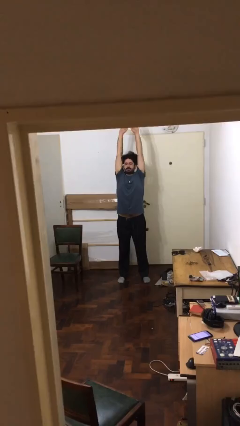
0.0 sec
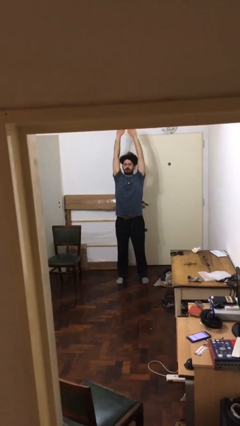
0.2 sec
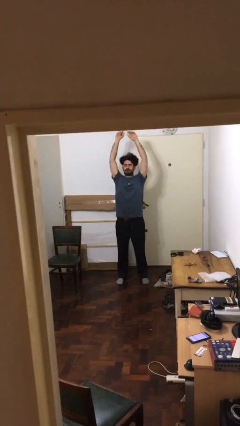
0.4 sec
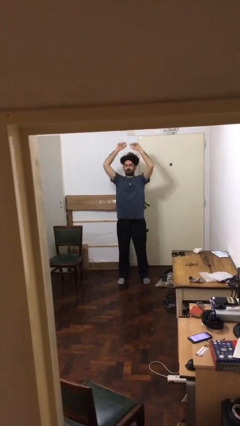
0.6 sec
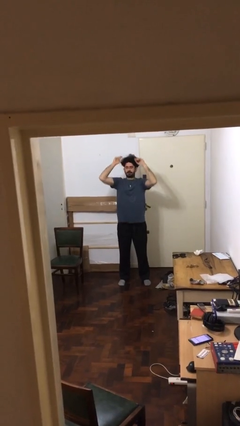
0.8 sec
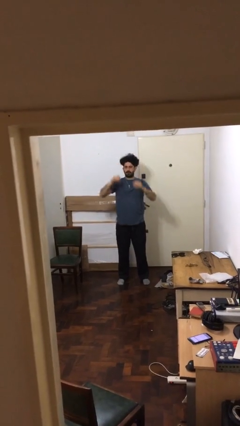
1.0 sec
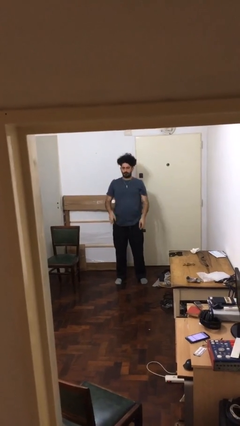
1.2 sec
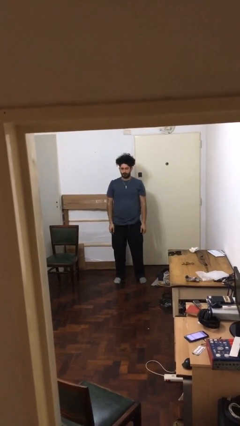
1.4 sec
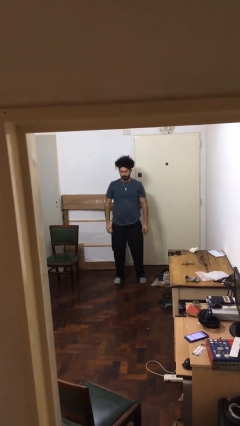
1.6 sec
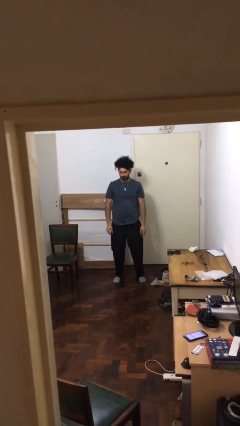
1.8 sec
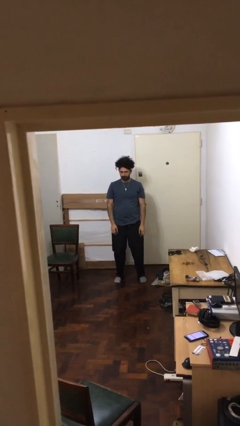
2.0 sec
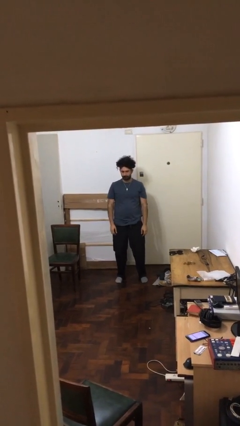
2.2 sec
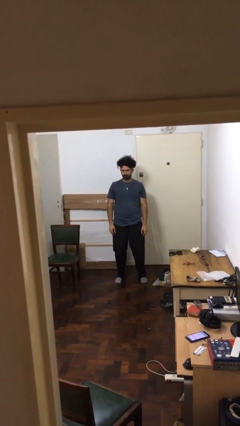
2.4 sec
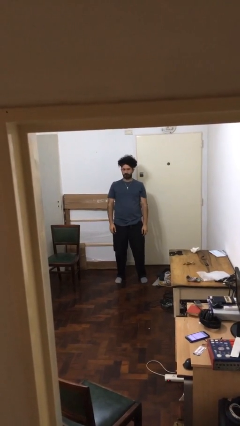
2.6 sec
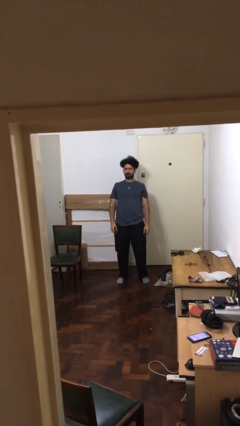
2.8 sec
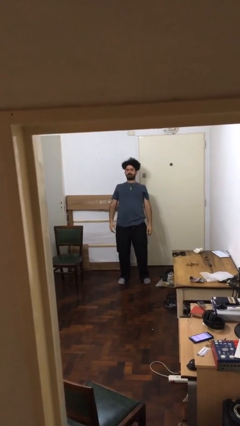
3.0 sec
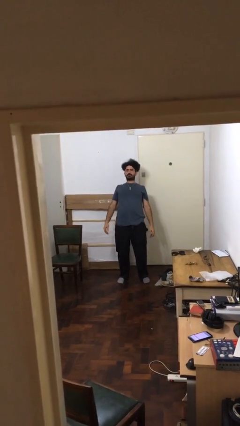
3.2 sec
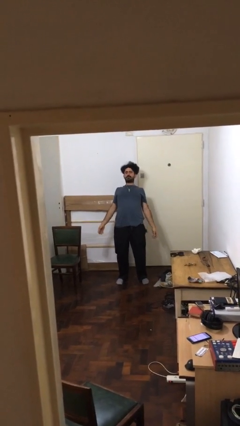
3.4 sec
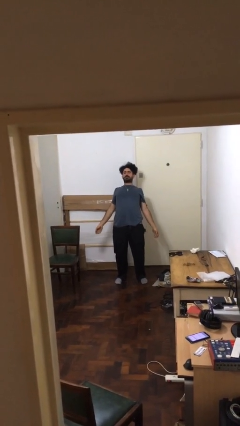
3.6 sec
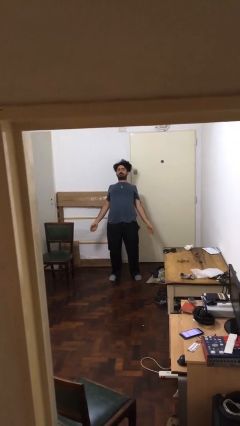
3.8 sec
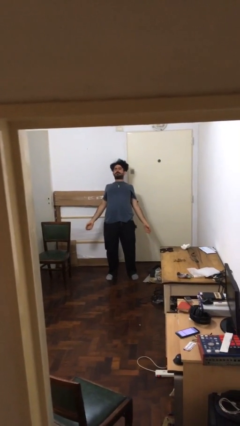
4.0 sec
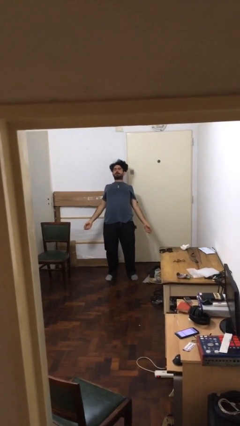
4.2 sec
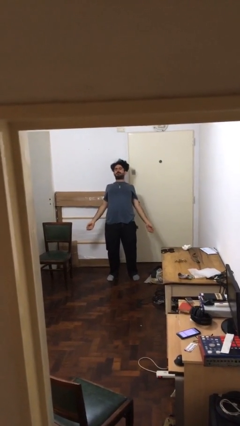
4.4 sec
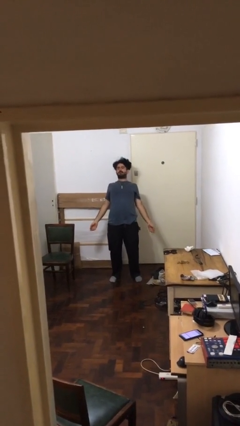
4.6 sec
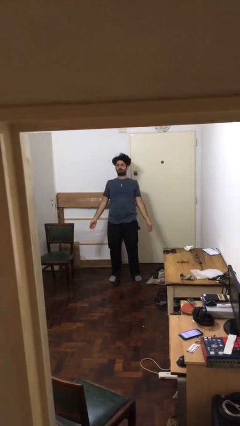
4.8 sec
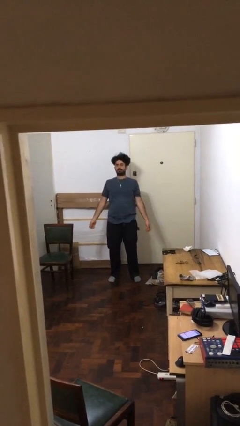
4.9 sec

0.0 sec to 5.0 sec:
person stretches back

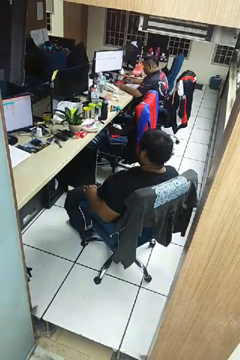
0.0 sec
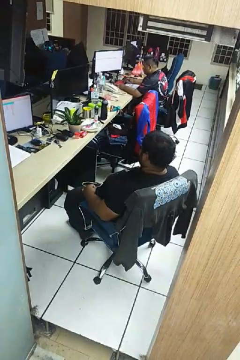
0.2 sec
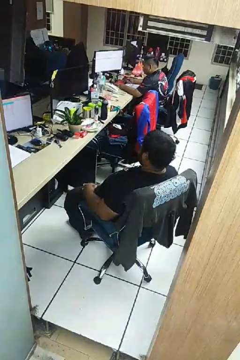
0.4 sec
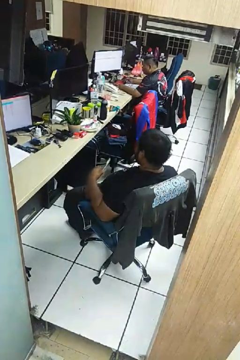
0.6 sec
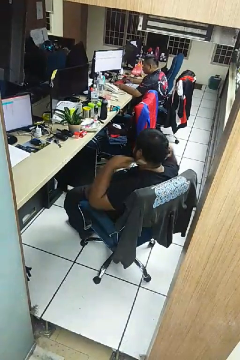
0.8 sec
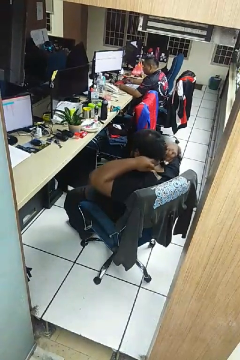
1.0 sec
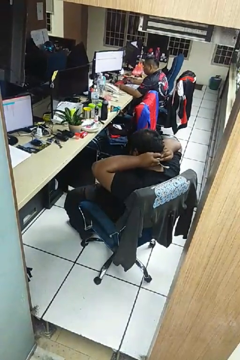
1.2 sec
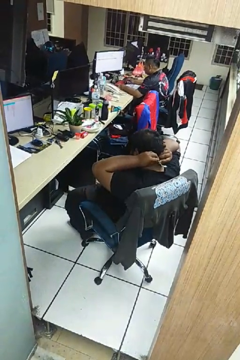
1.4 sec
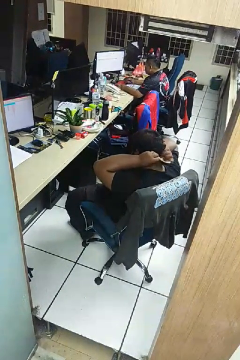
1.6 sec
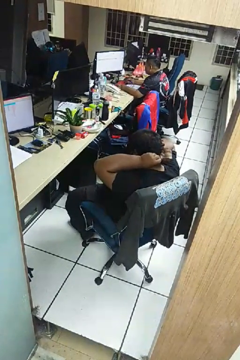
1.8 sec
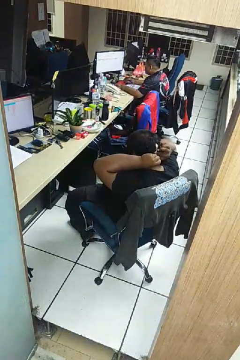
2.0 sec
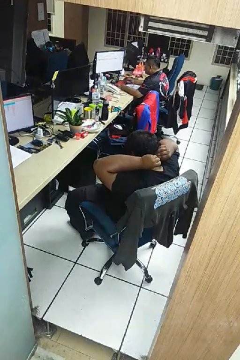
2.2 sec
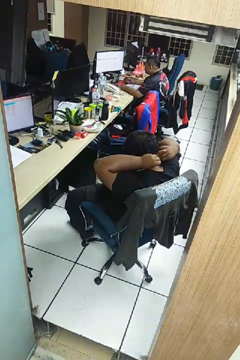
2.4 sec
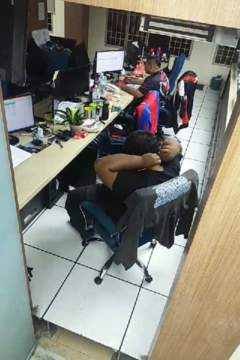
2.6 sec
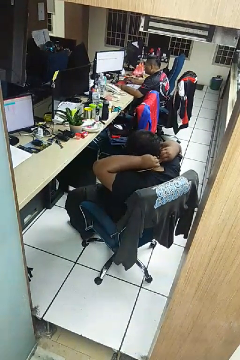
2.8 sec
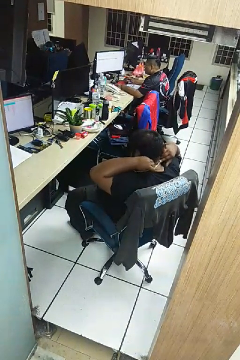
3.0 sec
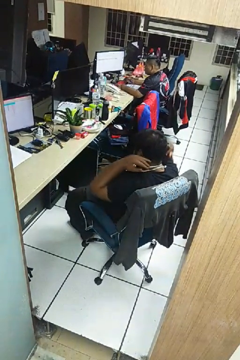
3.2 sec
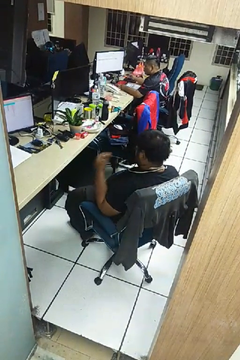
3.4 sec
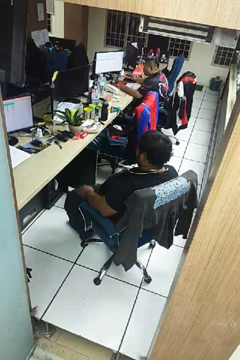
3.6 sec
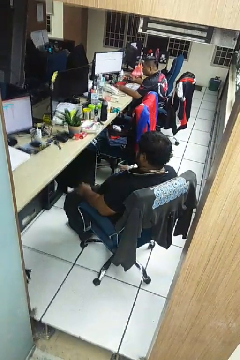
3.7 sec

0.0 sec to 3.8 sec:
person puts on necklace

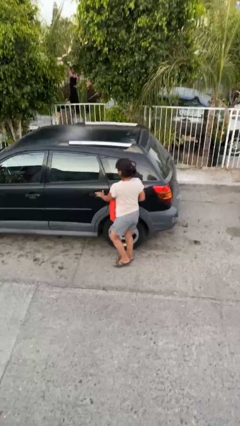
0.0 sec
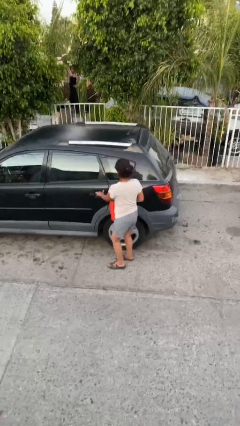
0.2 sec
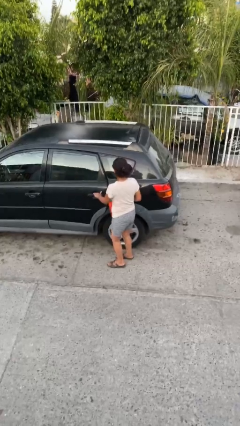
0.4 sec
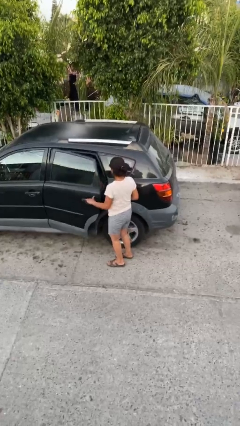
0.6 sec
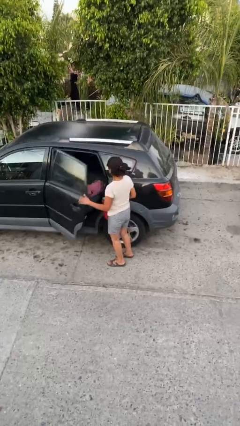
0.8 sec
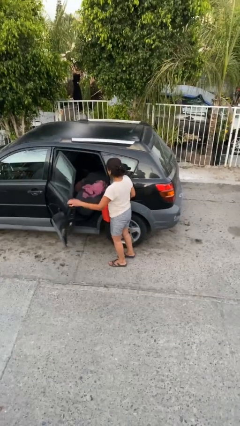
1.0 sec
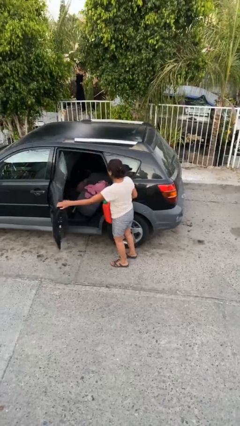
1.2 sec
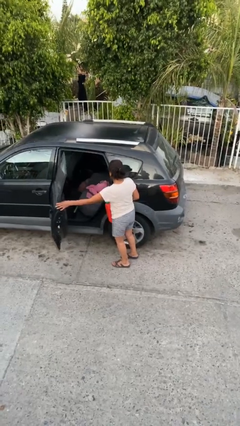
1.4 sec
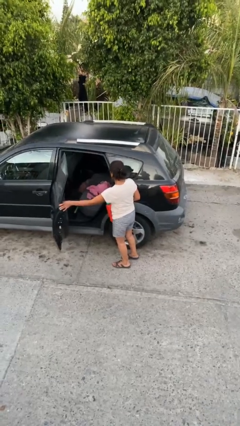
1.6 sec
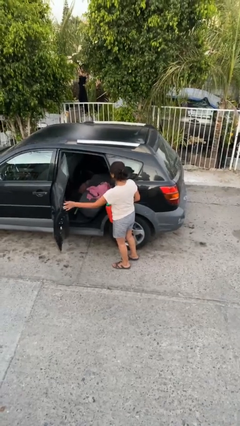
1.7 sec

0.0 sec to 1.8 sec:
person opens car door

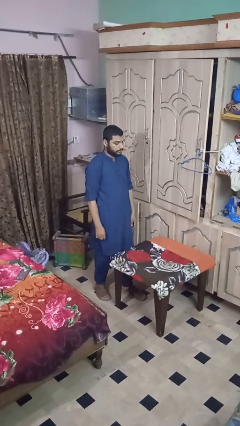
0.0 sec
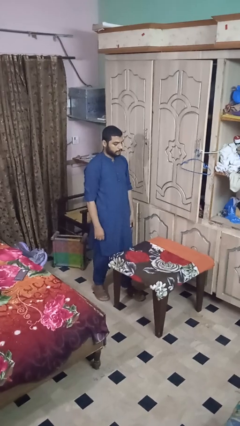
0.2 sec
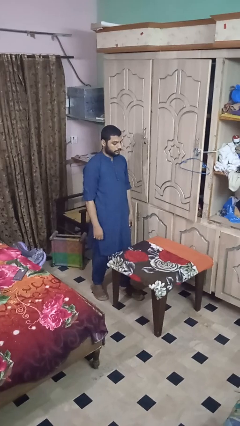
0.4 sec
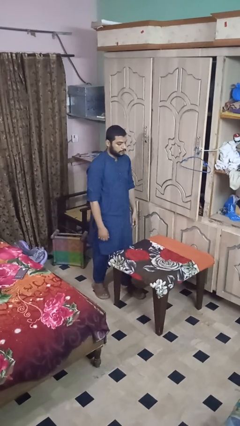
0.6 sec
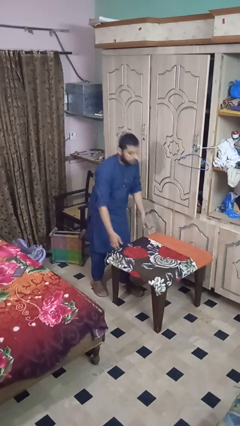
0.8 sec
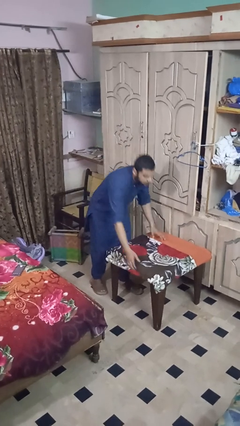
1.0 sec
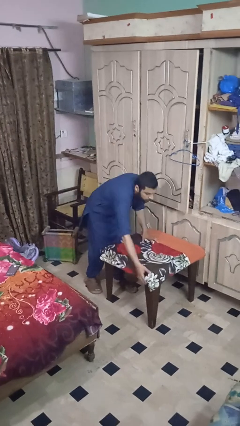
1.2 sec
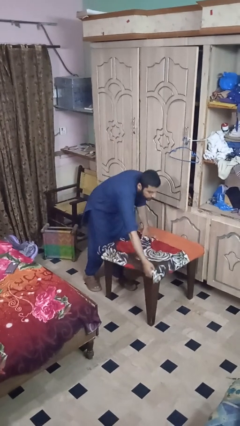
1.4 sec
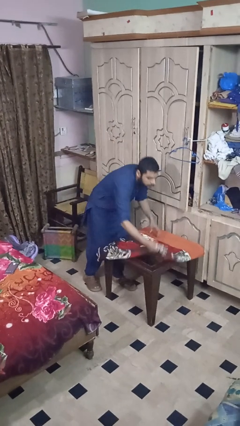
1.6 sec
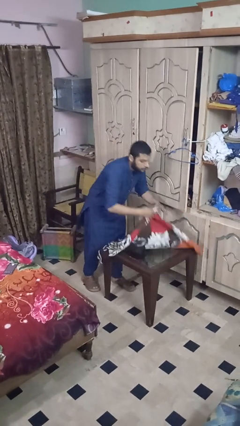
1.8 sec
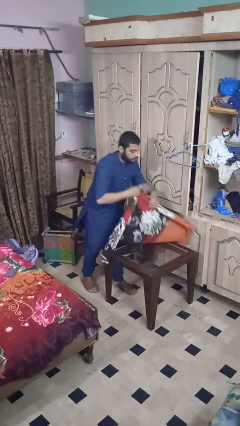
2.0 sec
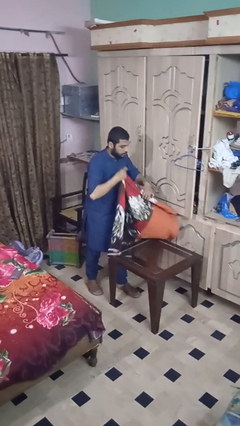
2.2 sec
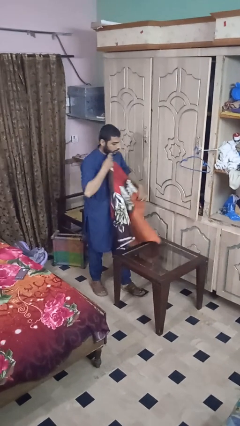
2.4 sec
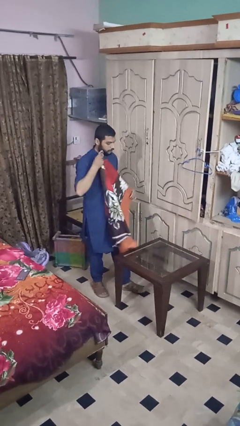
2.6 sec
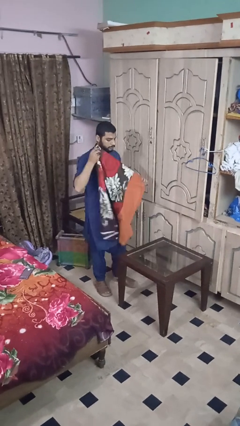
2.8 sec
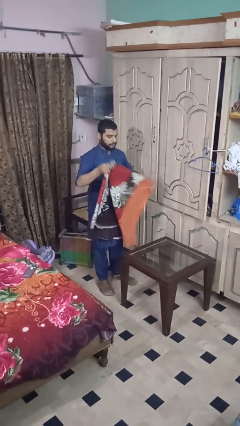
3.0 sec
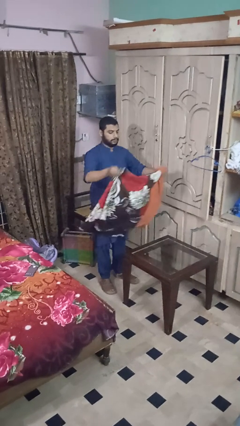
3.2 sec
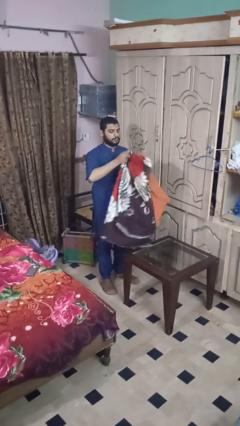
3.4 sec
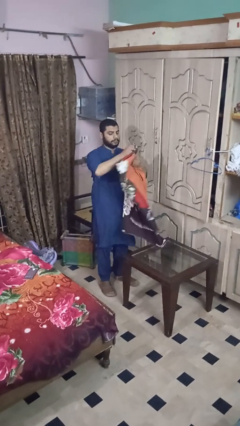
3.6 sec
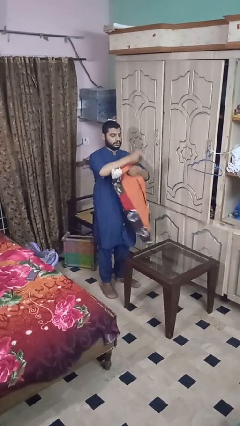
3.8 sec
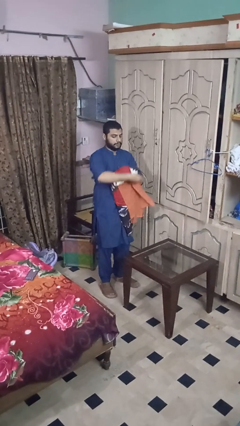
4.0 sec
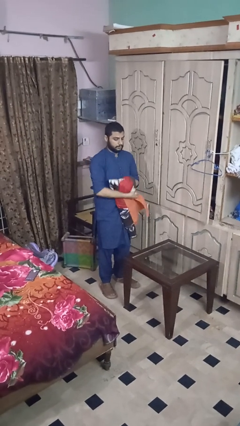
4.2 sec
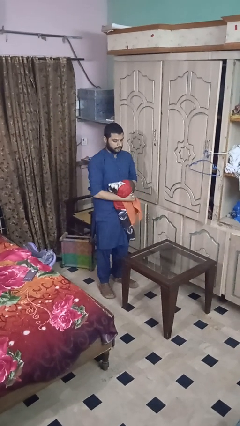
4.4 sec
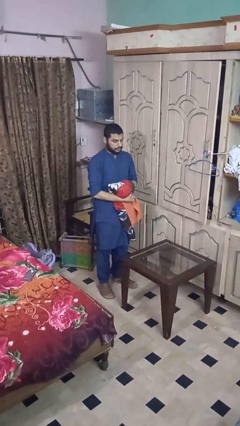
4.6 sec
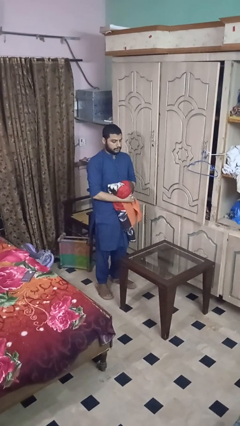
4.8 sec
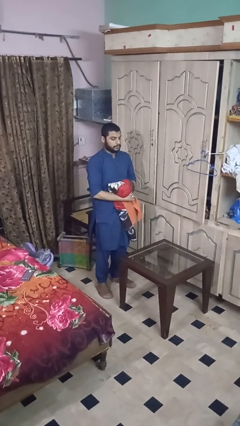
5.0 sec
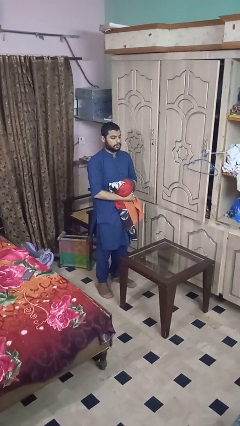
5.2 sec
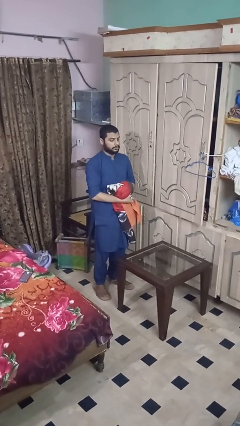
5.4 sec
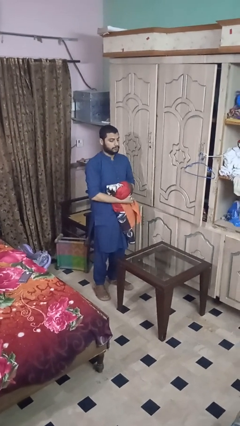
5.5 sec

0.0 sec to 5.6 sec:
person folds tablecloth

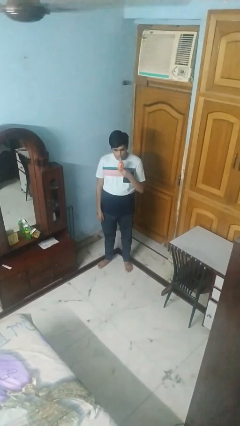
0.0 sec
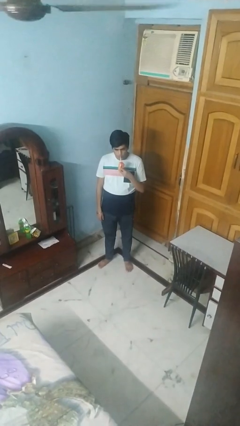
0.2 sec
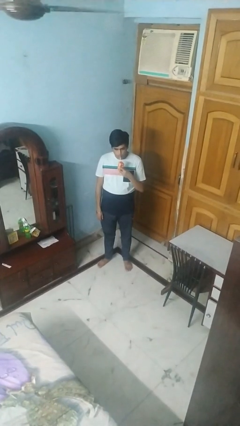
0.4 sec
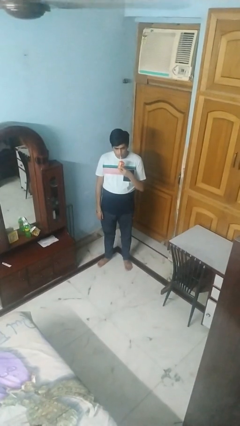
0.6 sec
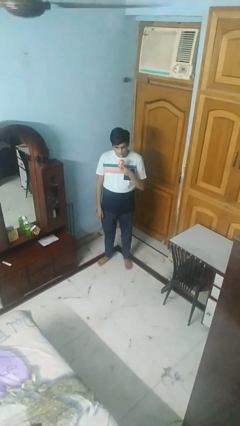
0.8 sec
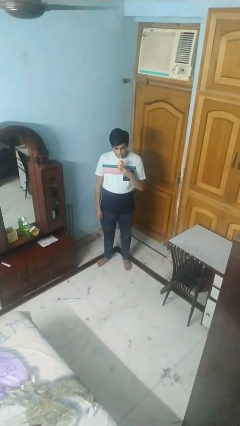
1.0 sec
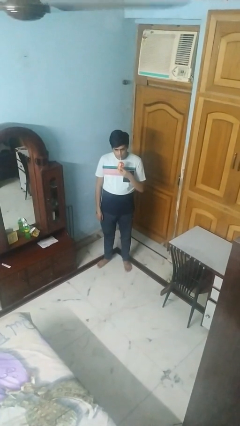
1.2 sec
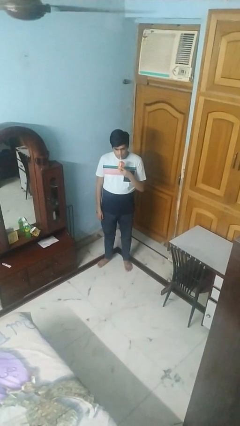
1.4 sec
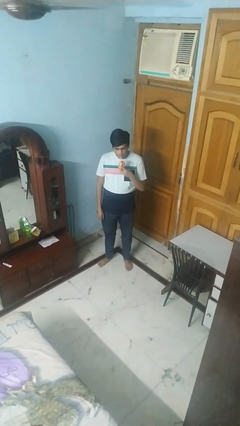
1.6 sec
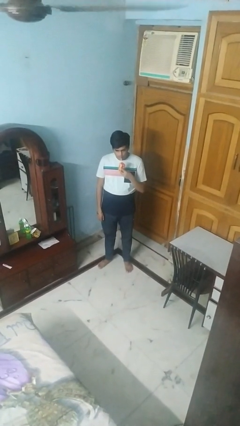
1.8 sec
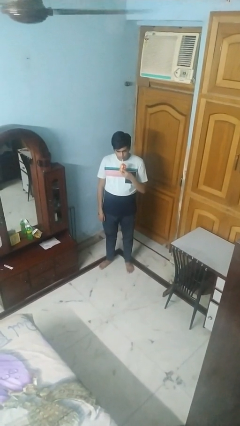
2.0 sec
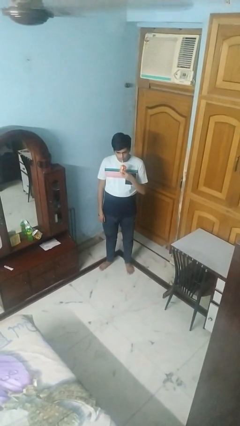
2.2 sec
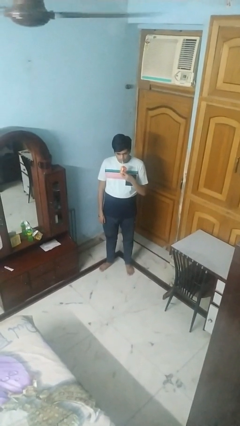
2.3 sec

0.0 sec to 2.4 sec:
person drinks from straw
